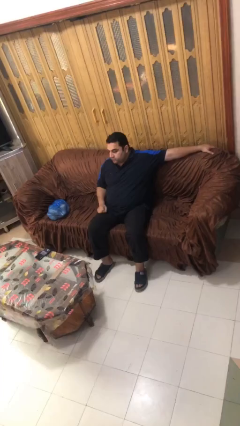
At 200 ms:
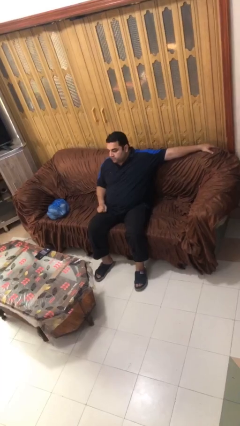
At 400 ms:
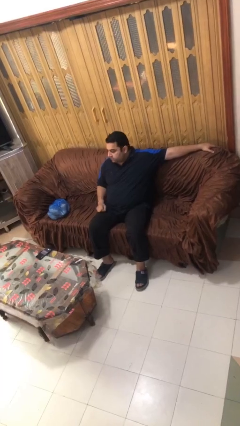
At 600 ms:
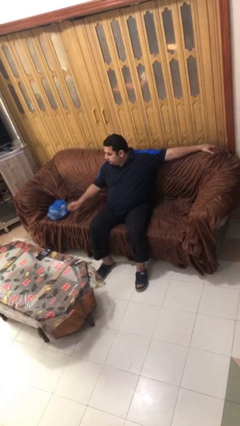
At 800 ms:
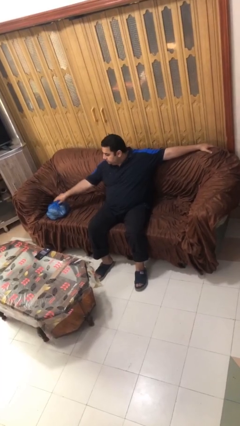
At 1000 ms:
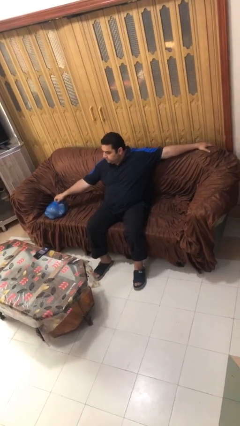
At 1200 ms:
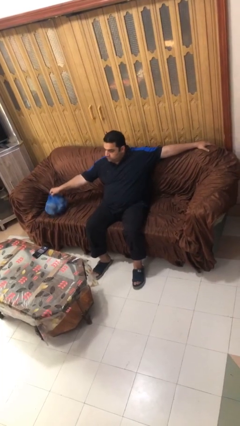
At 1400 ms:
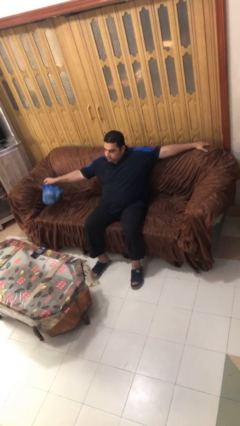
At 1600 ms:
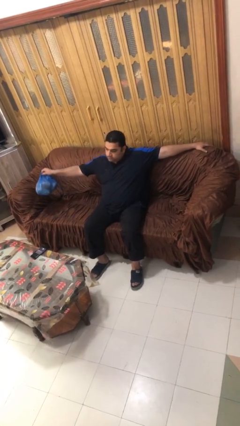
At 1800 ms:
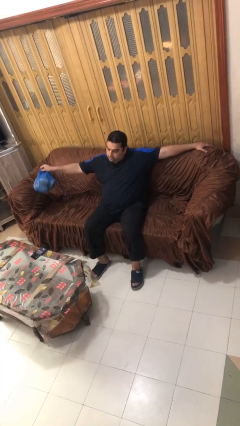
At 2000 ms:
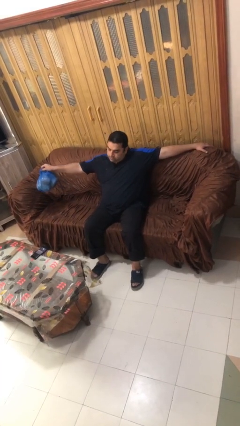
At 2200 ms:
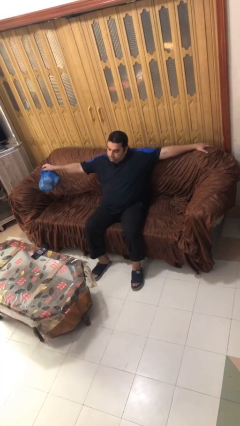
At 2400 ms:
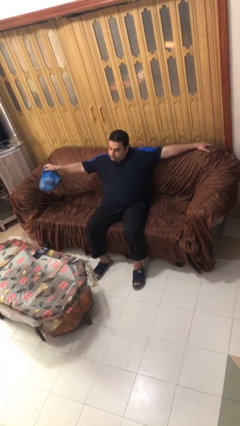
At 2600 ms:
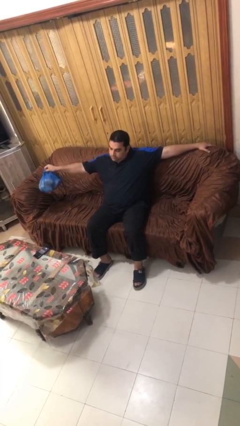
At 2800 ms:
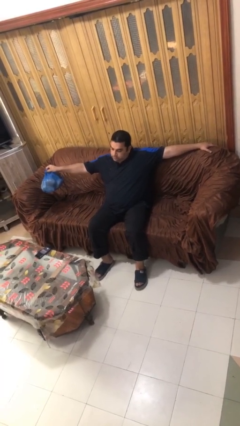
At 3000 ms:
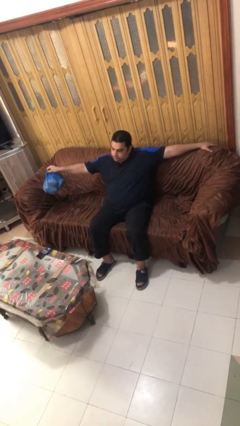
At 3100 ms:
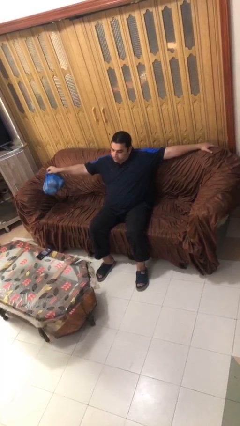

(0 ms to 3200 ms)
person picks up object from couch

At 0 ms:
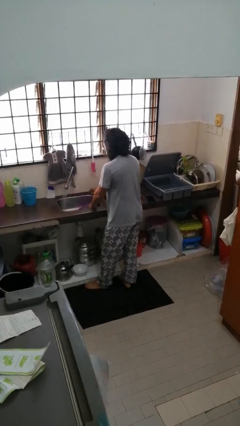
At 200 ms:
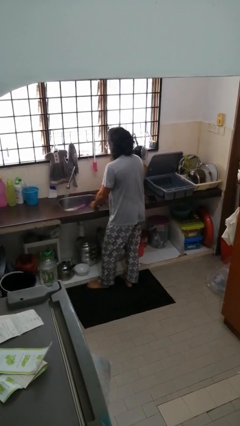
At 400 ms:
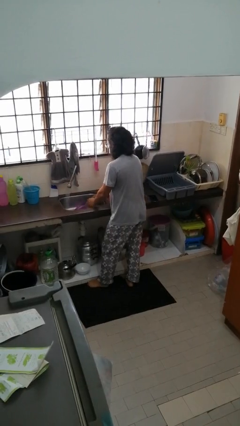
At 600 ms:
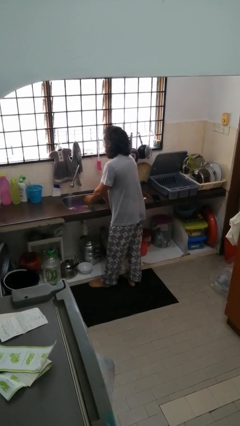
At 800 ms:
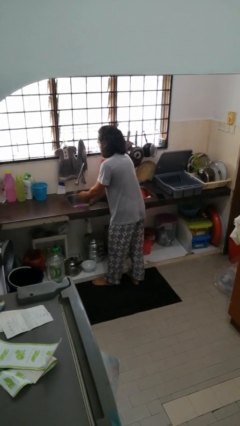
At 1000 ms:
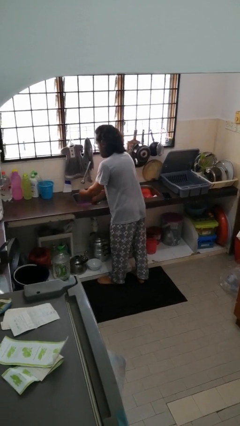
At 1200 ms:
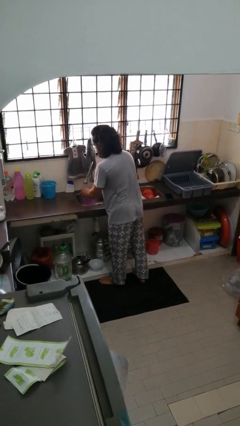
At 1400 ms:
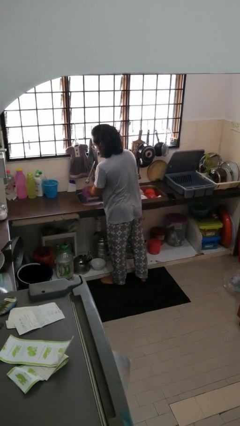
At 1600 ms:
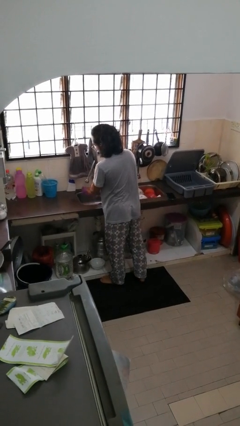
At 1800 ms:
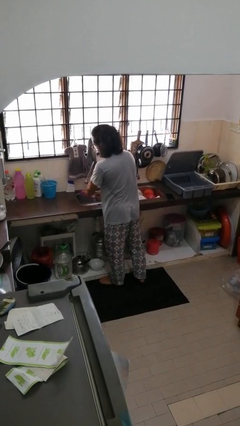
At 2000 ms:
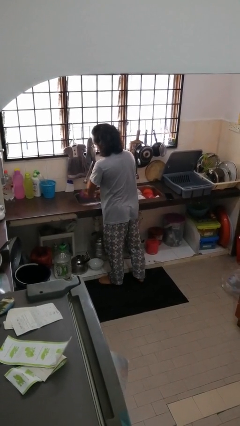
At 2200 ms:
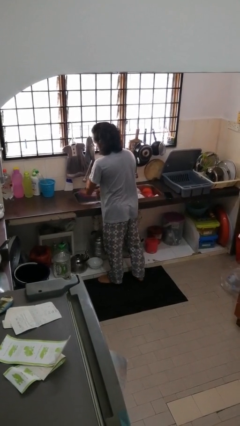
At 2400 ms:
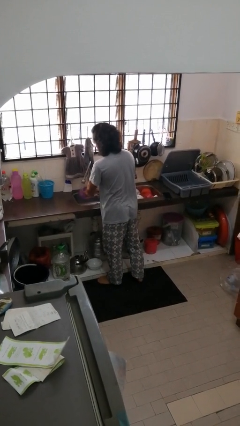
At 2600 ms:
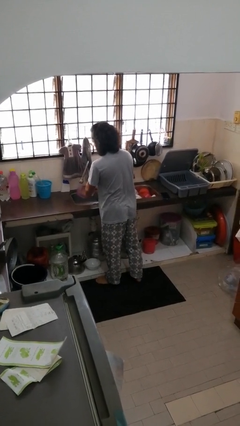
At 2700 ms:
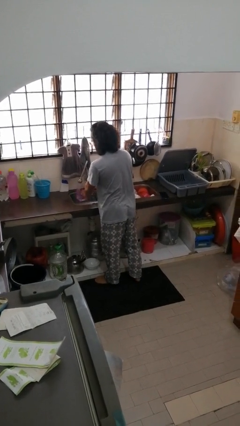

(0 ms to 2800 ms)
person washes dish

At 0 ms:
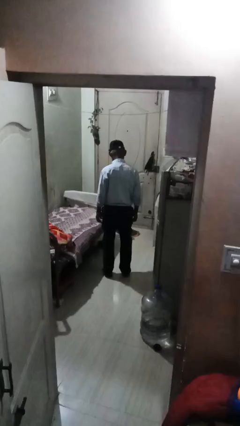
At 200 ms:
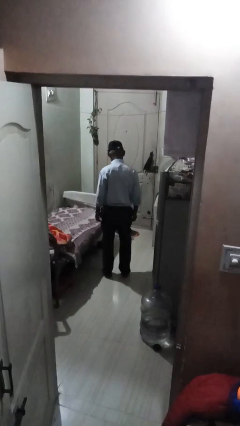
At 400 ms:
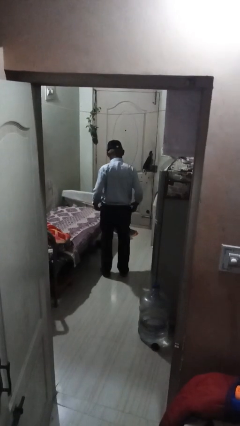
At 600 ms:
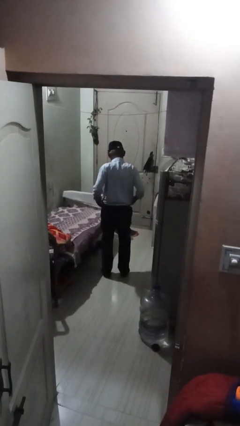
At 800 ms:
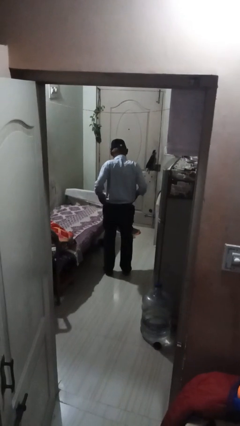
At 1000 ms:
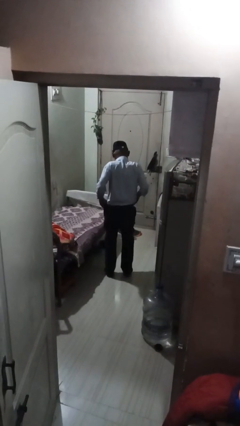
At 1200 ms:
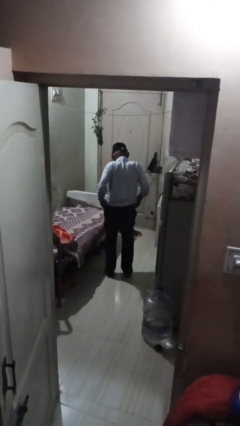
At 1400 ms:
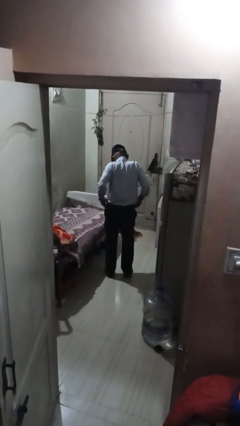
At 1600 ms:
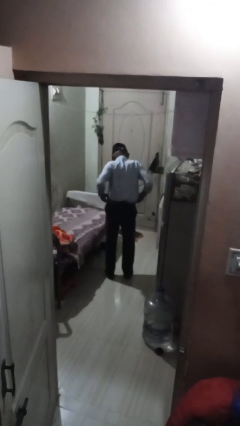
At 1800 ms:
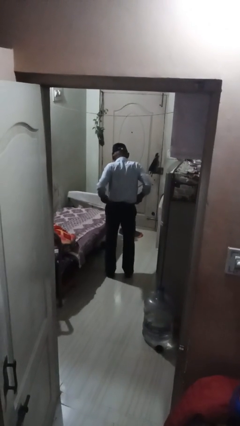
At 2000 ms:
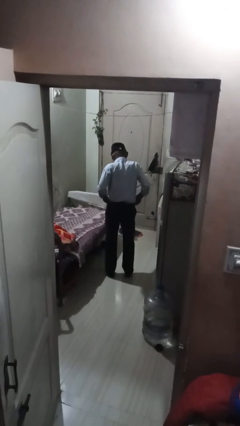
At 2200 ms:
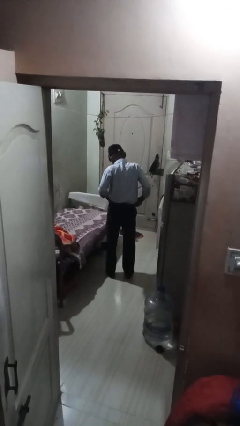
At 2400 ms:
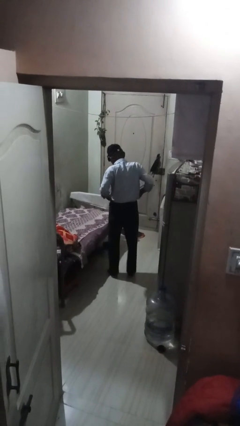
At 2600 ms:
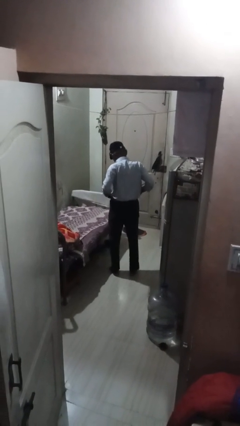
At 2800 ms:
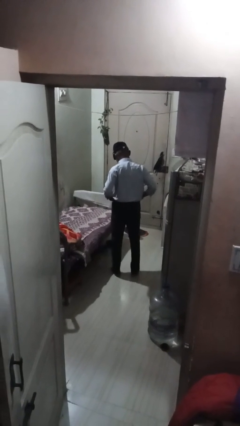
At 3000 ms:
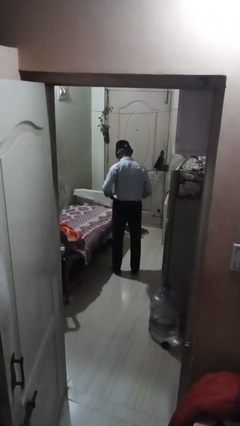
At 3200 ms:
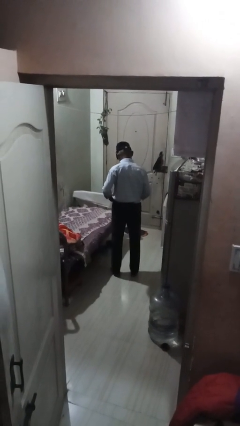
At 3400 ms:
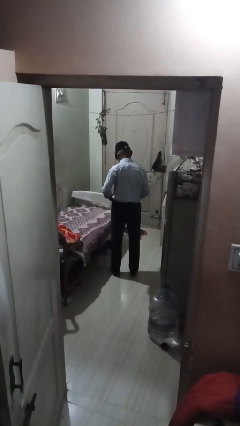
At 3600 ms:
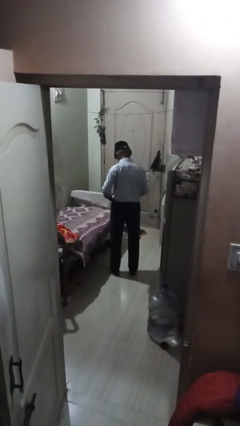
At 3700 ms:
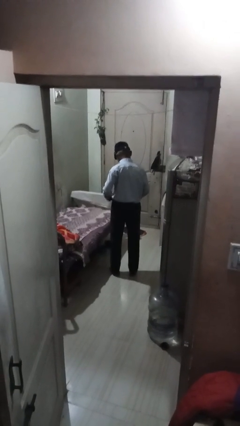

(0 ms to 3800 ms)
person hikes up pants

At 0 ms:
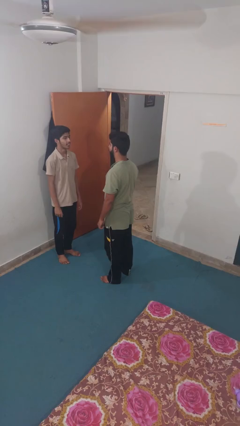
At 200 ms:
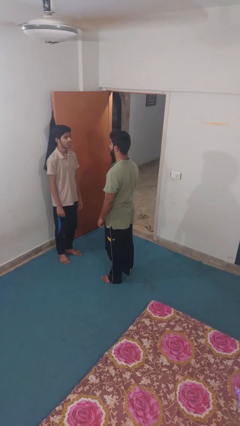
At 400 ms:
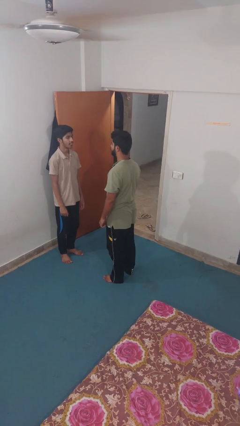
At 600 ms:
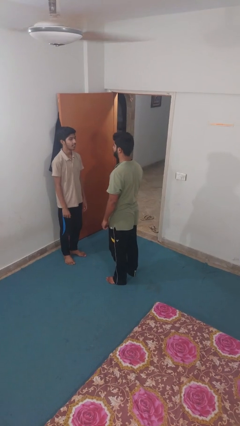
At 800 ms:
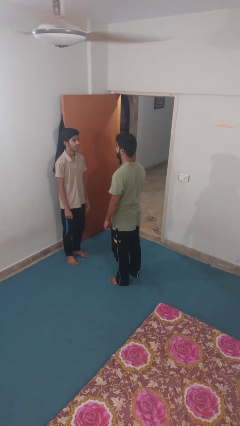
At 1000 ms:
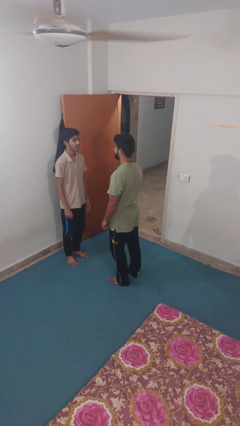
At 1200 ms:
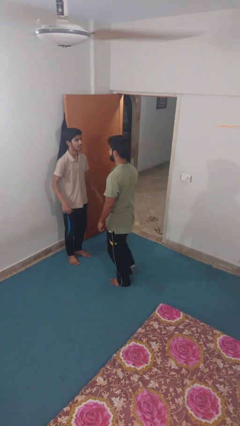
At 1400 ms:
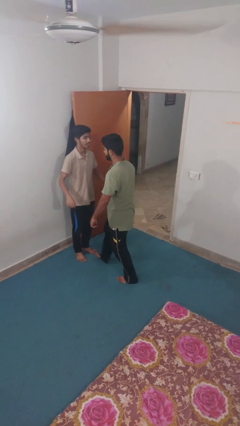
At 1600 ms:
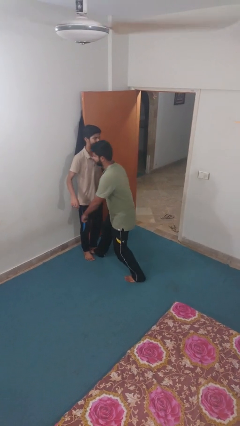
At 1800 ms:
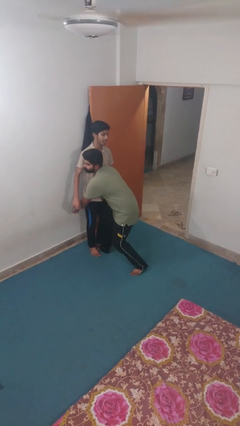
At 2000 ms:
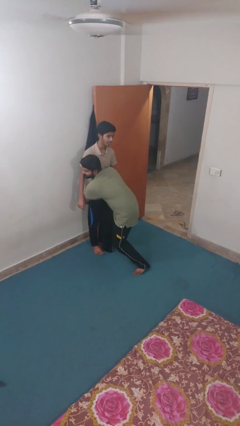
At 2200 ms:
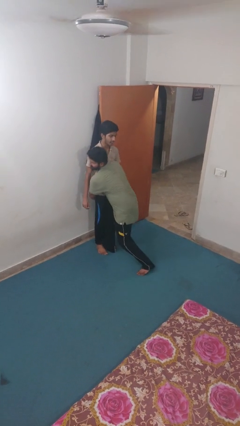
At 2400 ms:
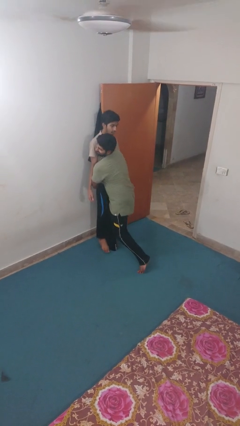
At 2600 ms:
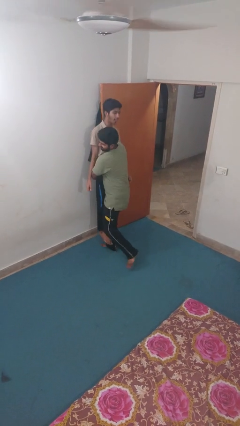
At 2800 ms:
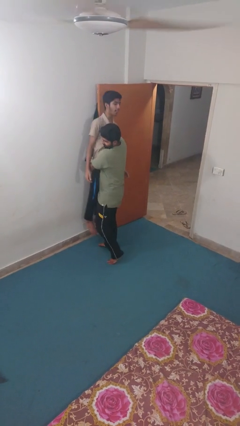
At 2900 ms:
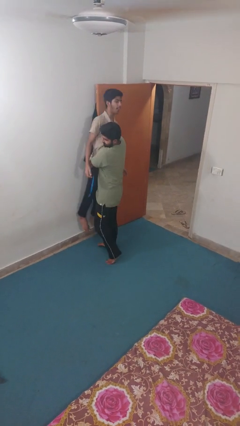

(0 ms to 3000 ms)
person picks up person

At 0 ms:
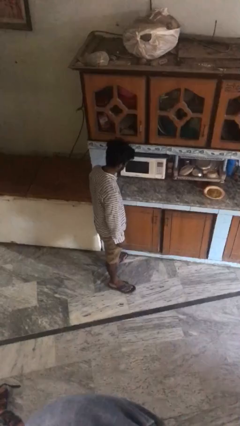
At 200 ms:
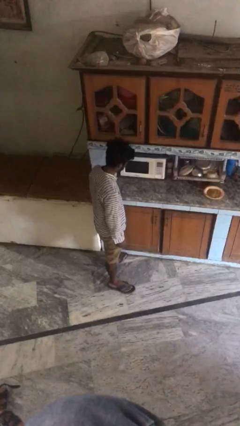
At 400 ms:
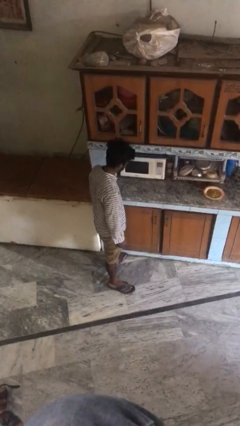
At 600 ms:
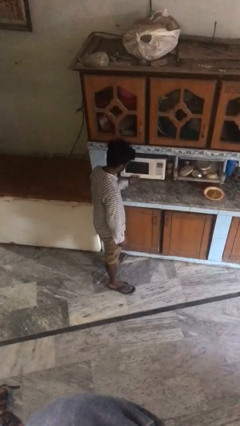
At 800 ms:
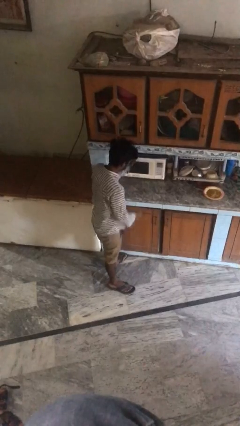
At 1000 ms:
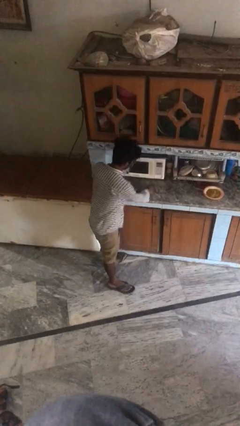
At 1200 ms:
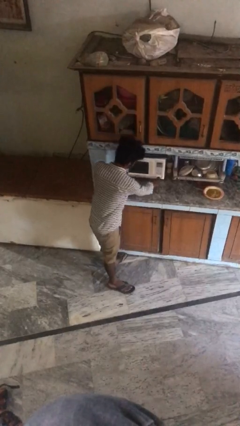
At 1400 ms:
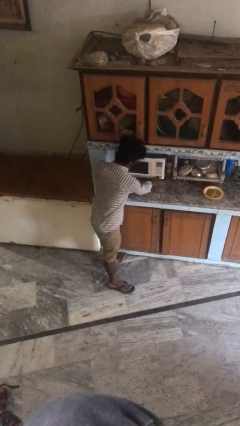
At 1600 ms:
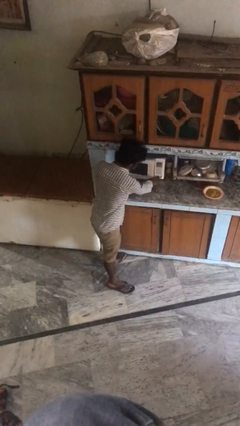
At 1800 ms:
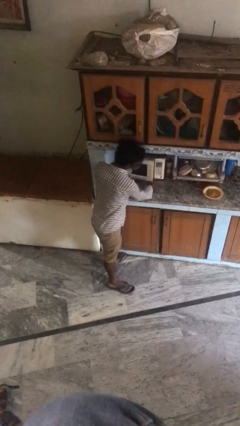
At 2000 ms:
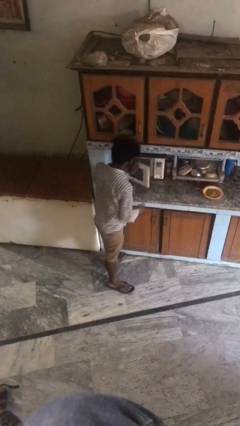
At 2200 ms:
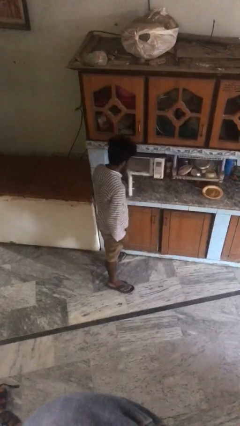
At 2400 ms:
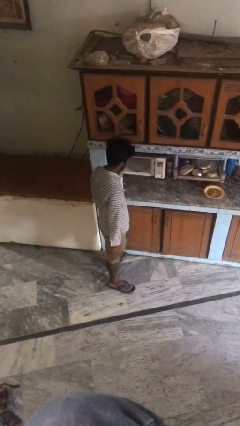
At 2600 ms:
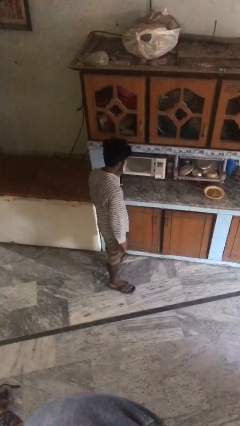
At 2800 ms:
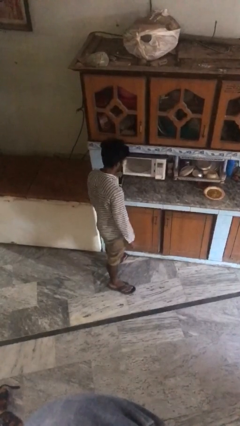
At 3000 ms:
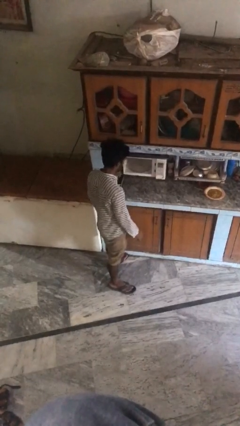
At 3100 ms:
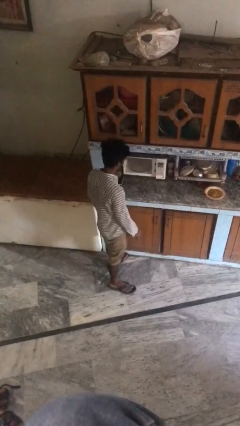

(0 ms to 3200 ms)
person opens oven door

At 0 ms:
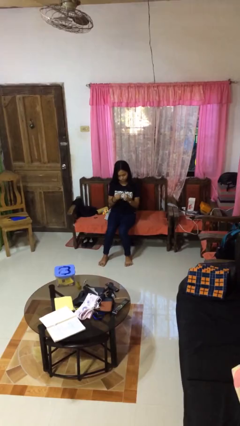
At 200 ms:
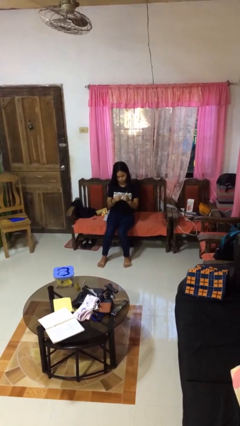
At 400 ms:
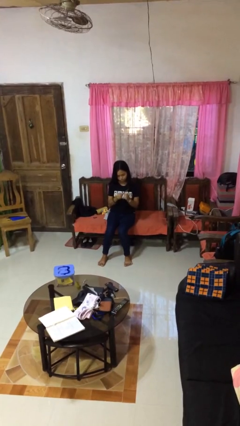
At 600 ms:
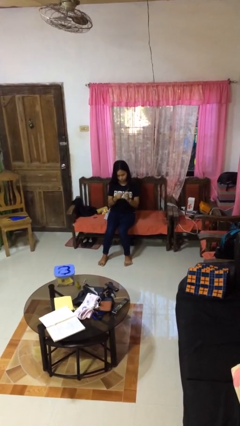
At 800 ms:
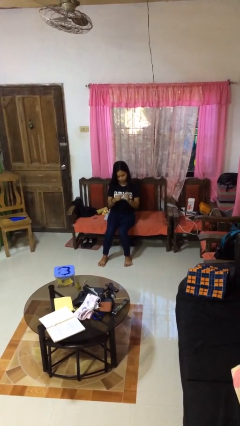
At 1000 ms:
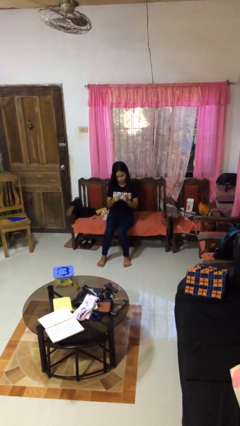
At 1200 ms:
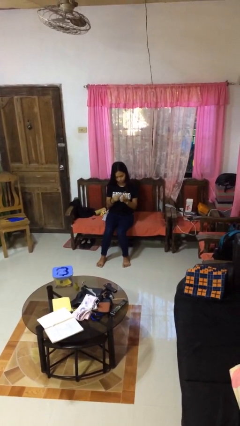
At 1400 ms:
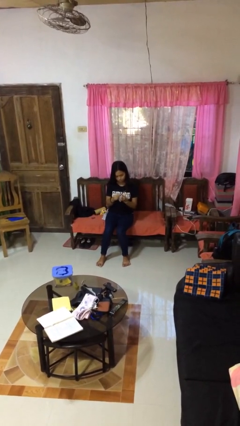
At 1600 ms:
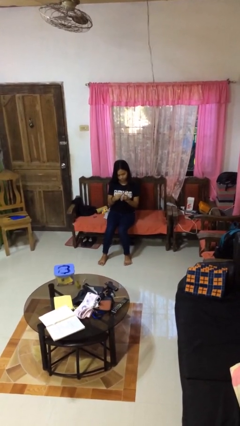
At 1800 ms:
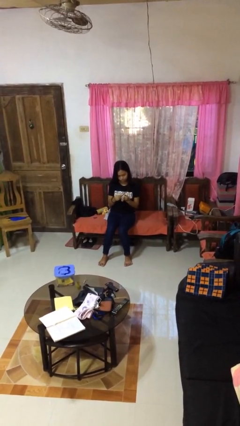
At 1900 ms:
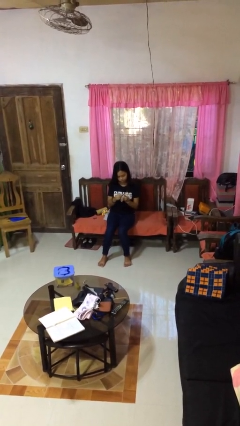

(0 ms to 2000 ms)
person files fingernails
